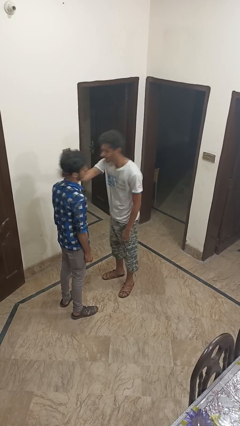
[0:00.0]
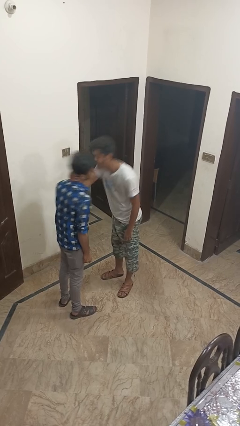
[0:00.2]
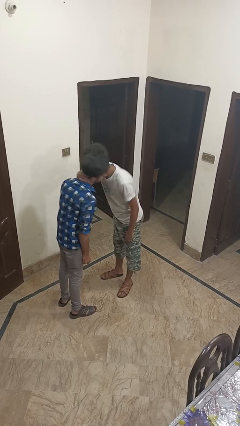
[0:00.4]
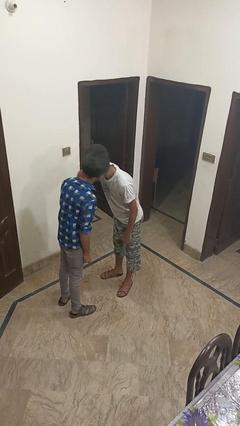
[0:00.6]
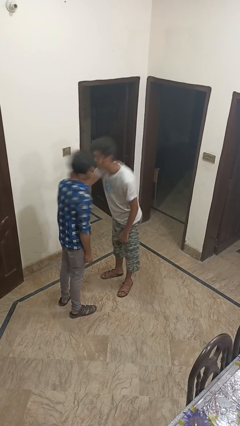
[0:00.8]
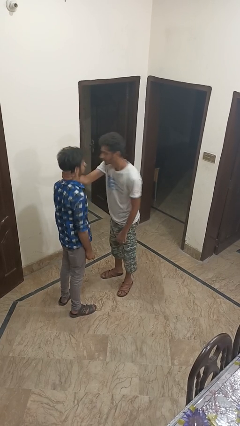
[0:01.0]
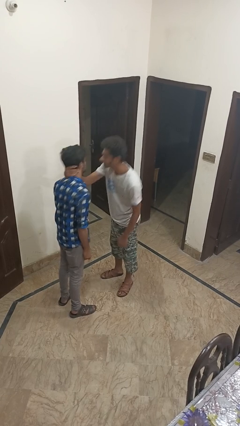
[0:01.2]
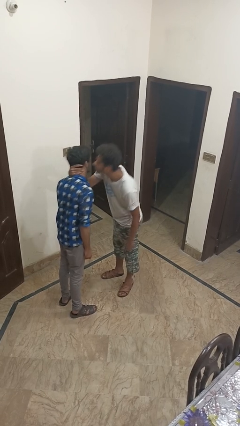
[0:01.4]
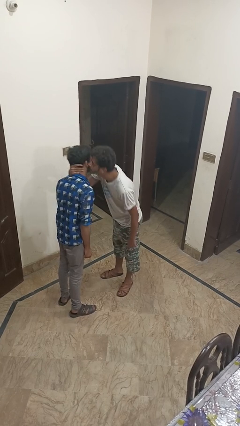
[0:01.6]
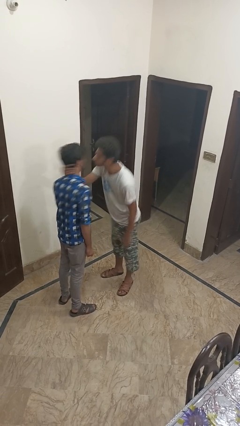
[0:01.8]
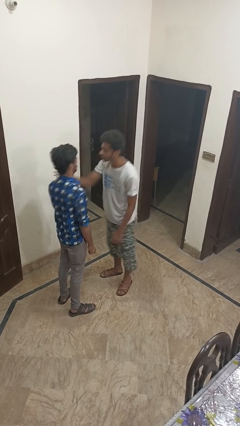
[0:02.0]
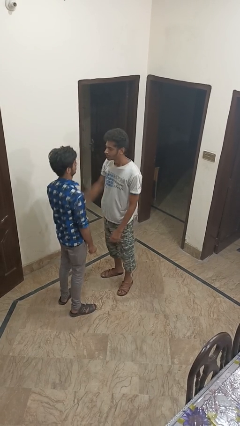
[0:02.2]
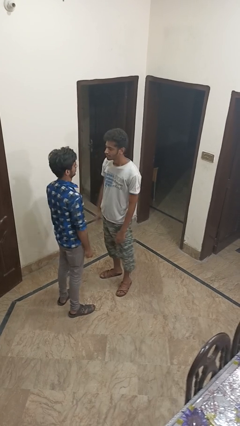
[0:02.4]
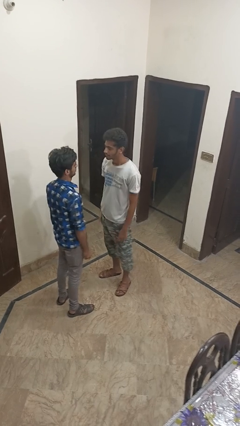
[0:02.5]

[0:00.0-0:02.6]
person kisses cheek of person

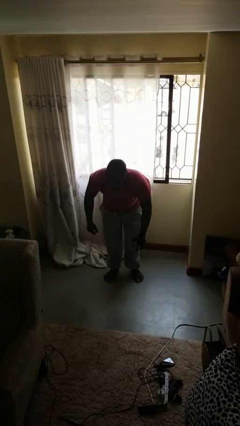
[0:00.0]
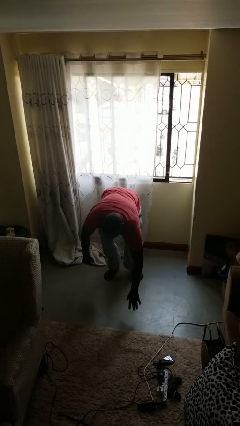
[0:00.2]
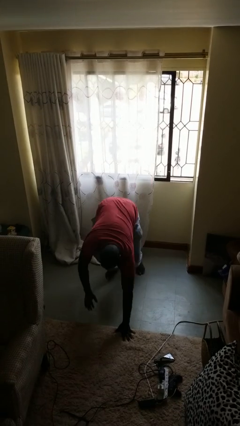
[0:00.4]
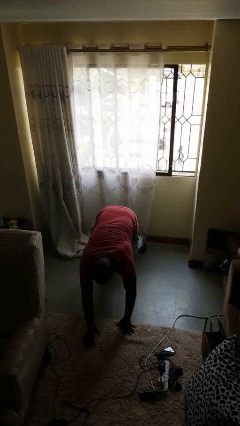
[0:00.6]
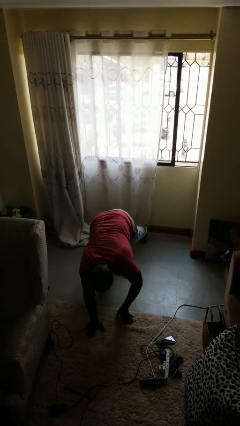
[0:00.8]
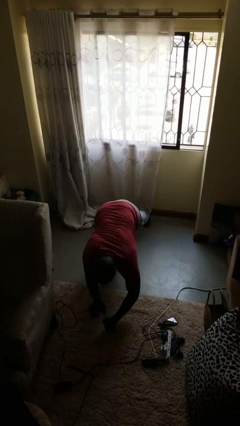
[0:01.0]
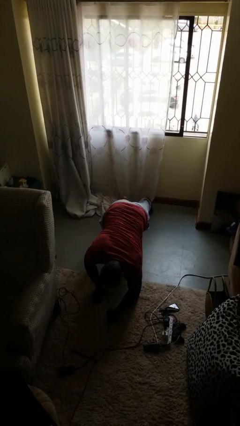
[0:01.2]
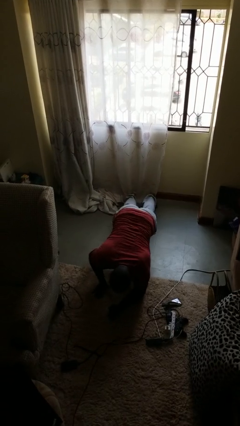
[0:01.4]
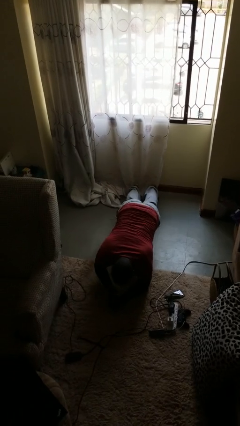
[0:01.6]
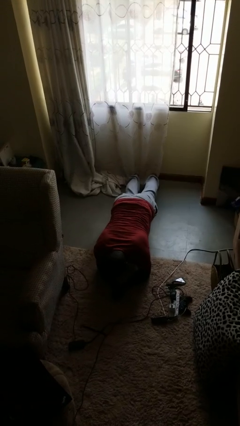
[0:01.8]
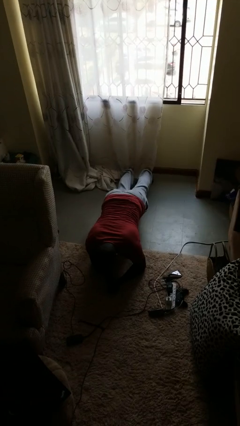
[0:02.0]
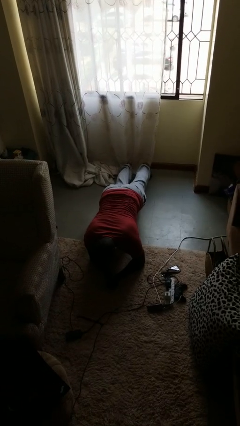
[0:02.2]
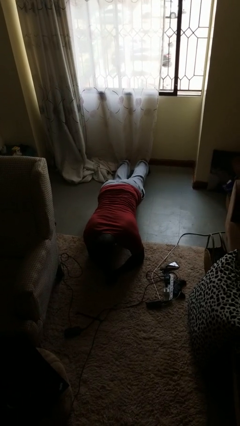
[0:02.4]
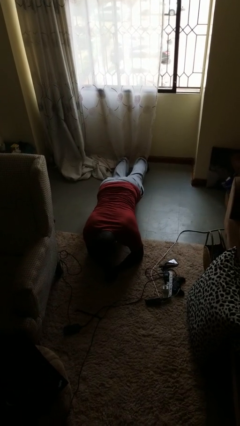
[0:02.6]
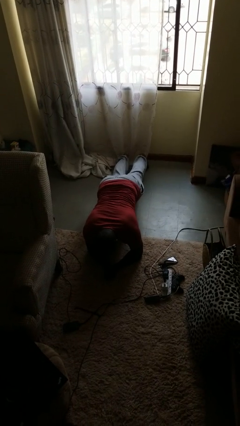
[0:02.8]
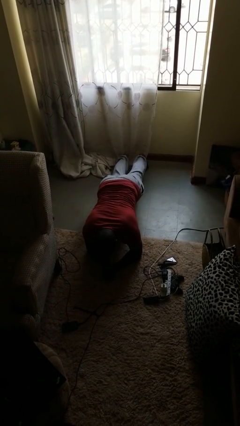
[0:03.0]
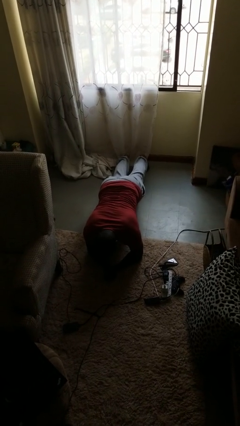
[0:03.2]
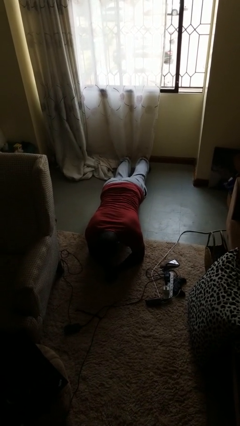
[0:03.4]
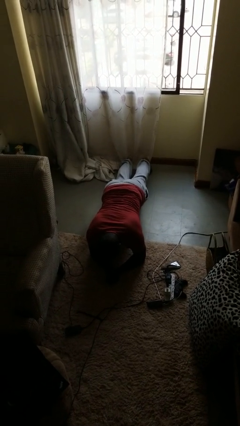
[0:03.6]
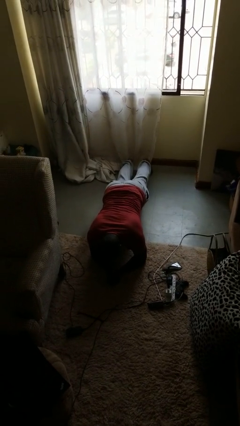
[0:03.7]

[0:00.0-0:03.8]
person exercises with plank

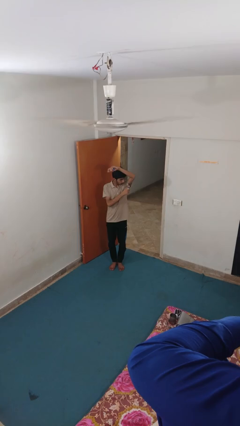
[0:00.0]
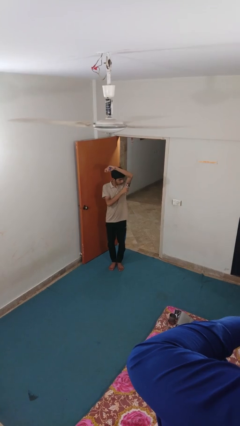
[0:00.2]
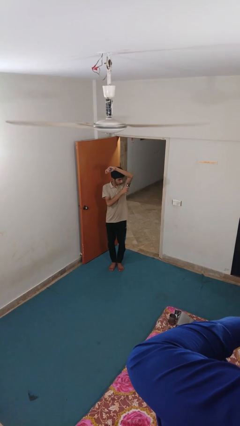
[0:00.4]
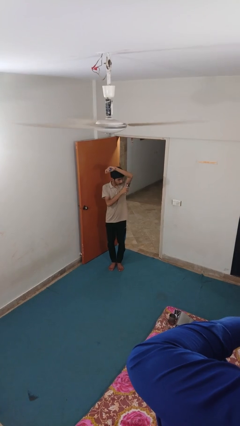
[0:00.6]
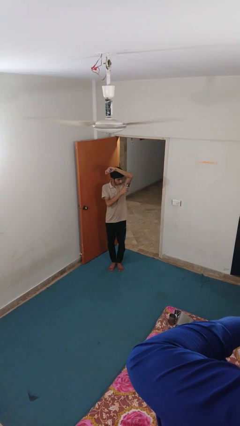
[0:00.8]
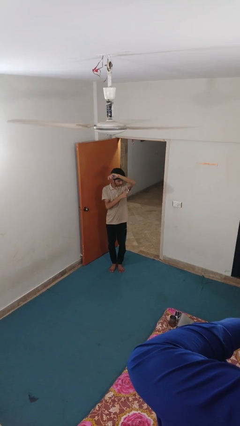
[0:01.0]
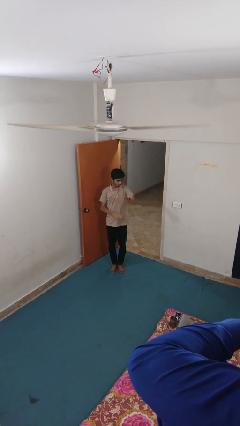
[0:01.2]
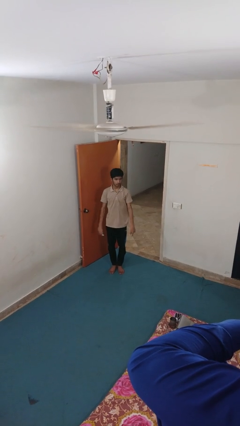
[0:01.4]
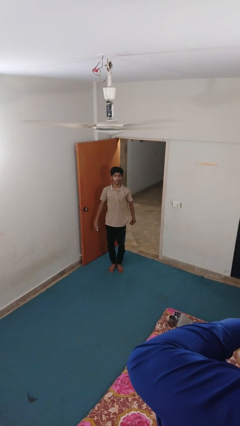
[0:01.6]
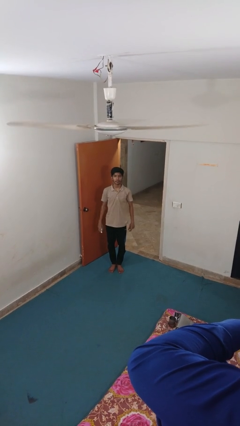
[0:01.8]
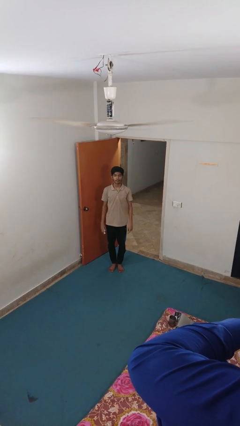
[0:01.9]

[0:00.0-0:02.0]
person applies deodorant

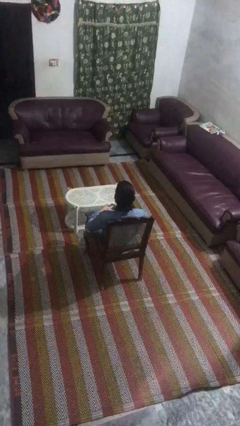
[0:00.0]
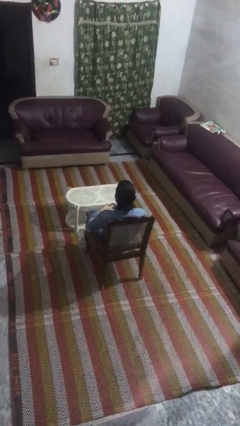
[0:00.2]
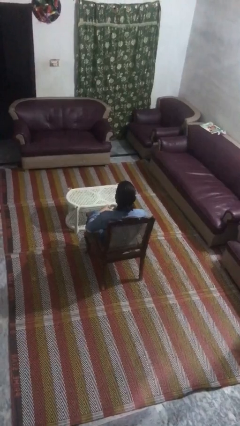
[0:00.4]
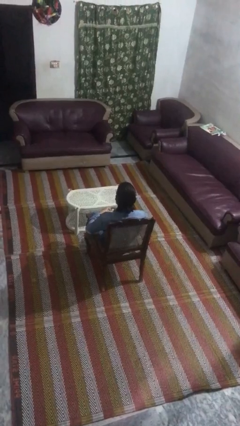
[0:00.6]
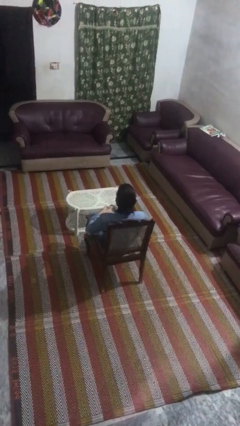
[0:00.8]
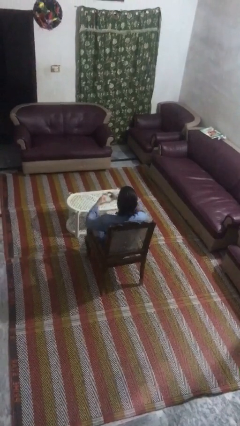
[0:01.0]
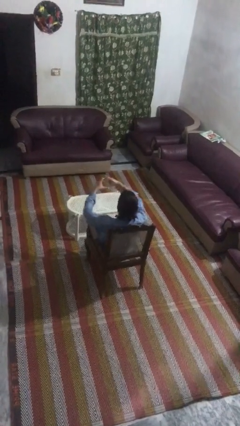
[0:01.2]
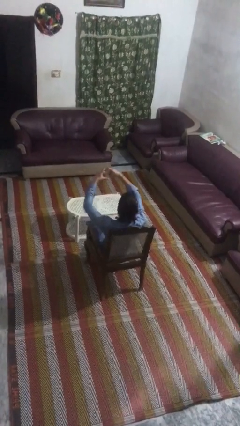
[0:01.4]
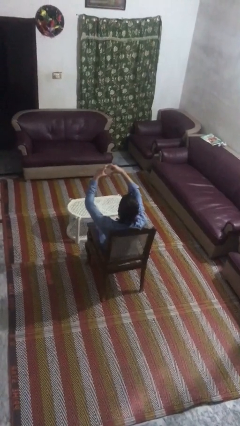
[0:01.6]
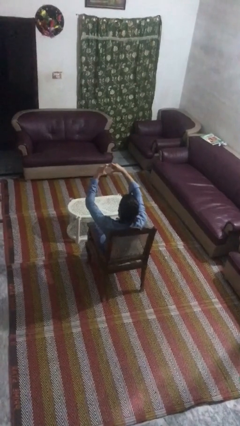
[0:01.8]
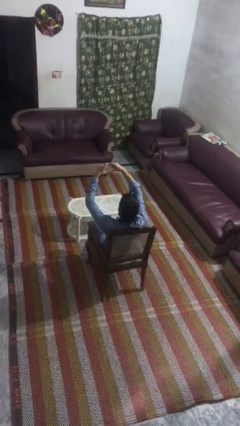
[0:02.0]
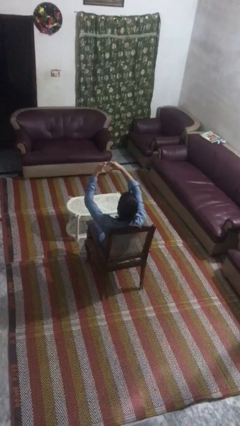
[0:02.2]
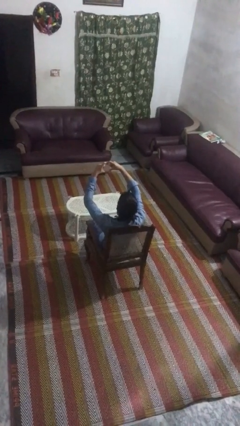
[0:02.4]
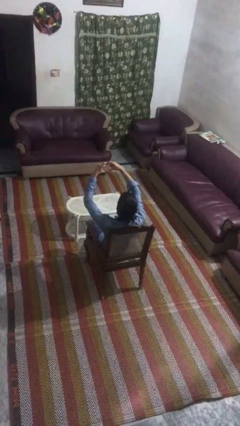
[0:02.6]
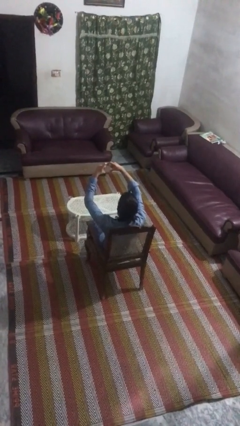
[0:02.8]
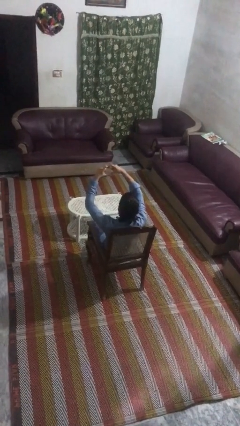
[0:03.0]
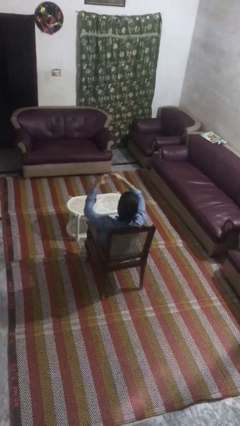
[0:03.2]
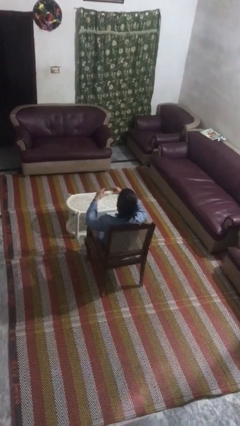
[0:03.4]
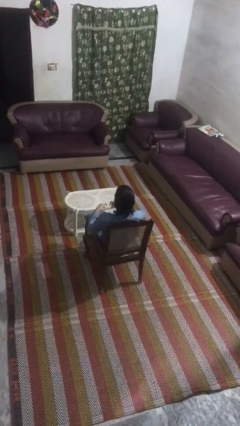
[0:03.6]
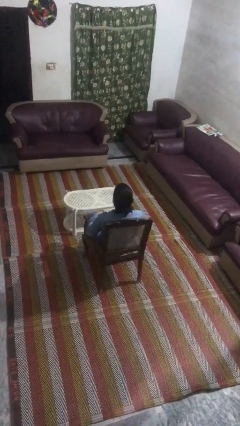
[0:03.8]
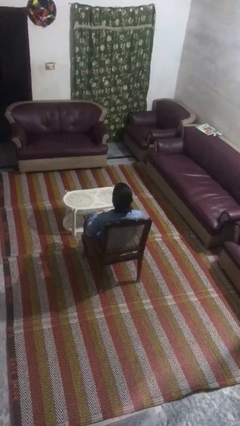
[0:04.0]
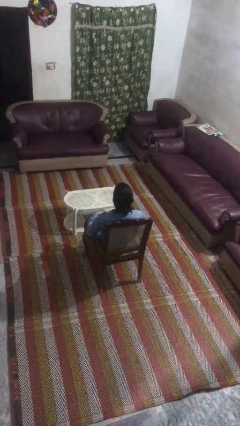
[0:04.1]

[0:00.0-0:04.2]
person gestures heart

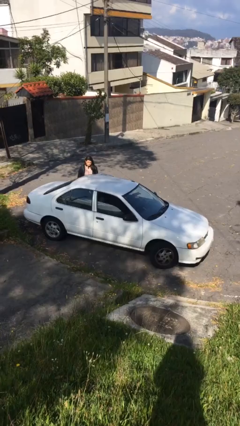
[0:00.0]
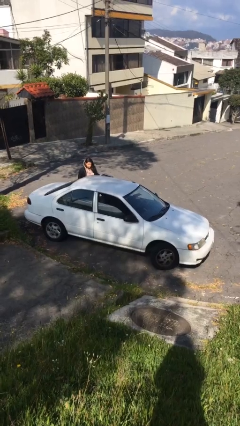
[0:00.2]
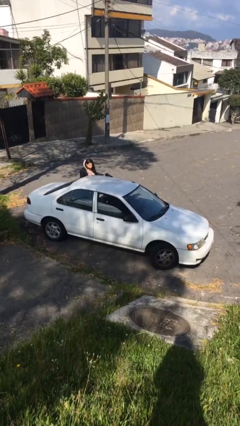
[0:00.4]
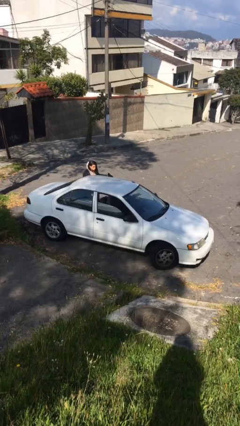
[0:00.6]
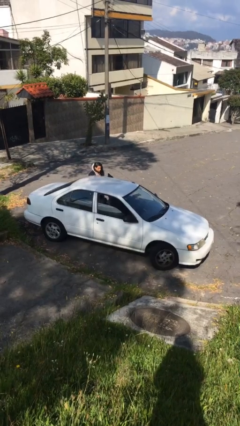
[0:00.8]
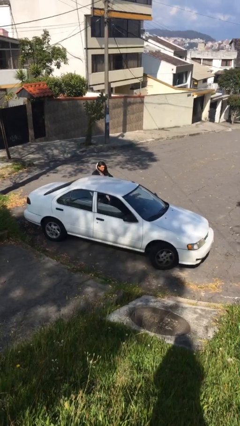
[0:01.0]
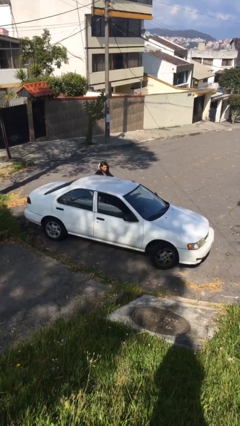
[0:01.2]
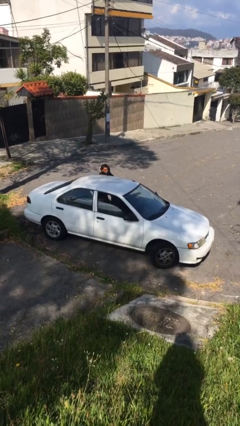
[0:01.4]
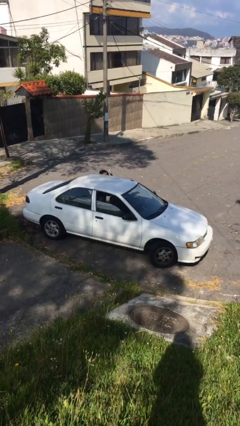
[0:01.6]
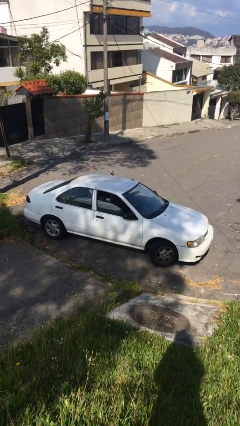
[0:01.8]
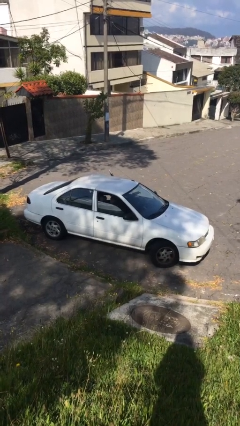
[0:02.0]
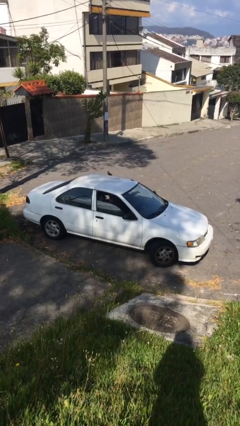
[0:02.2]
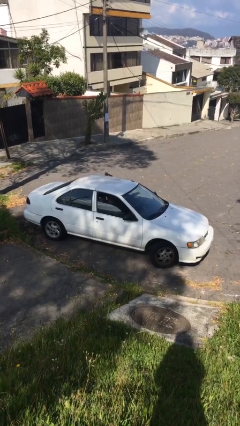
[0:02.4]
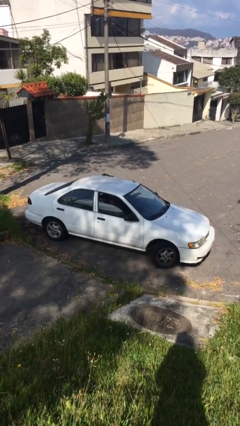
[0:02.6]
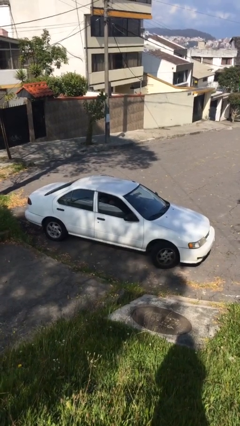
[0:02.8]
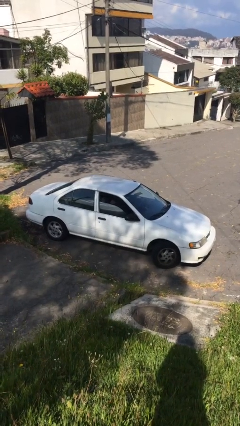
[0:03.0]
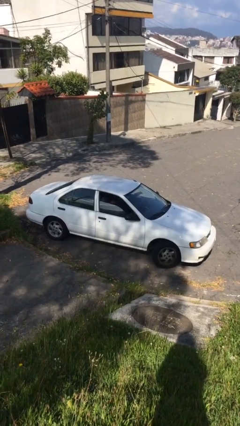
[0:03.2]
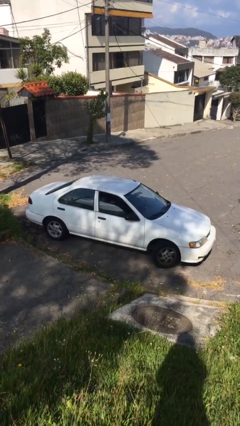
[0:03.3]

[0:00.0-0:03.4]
car picks up person

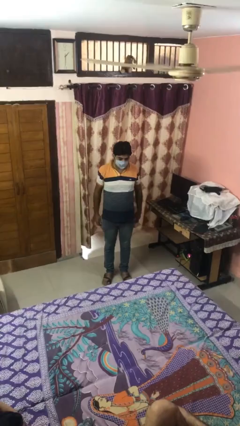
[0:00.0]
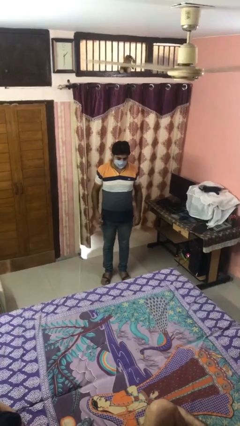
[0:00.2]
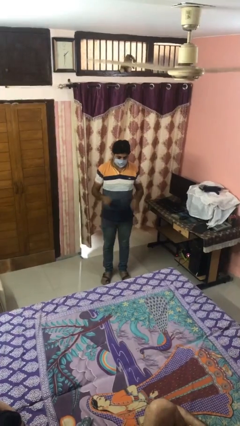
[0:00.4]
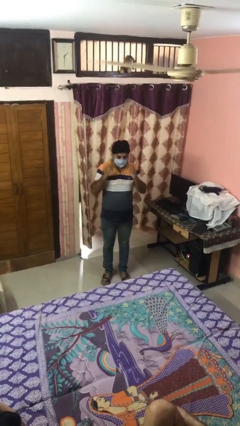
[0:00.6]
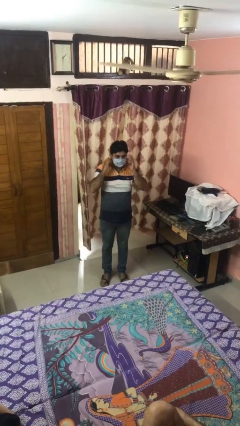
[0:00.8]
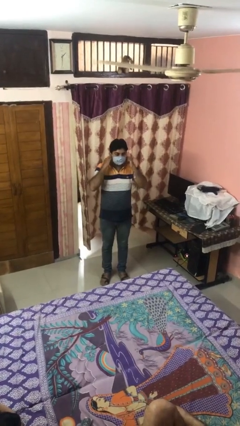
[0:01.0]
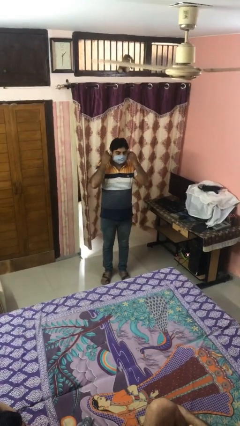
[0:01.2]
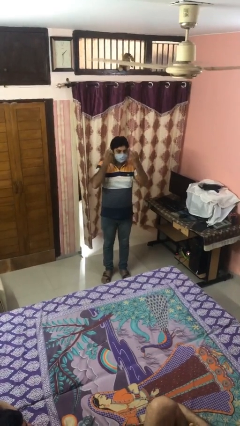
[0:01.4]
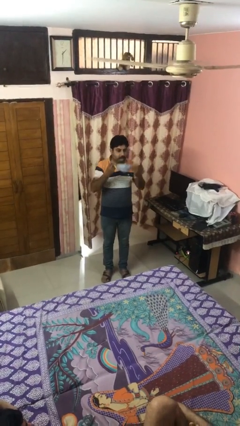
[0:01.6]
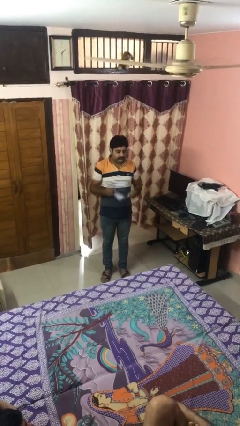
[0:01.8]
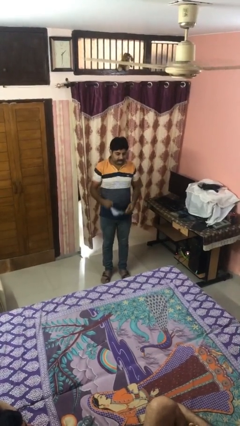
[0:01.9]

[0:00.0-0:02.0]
person takes off facemask
